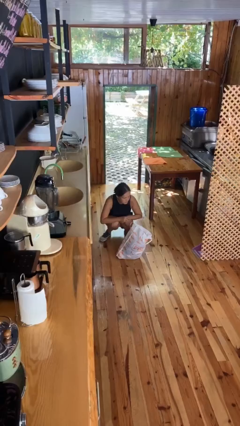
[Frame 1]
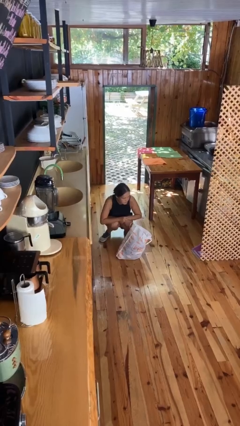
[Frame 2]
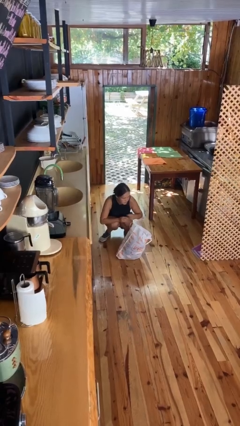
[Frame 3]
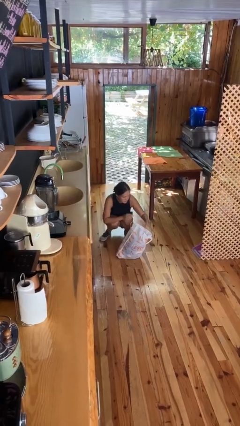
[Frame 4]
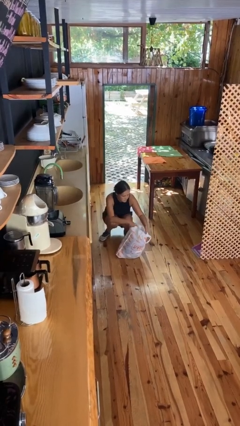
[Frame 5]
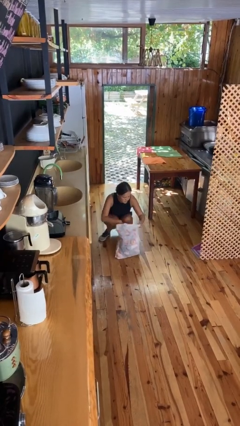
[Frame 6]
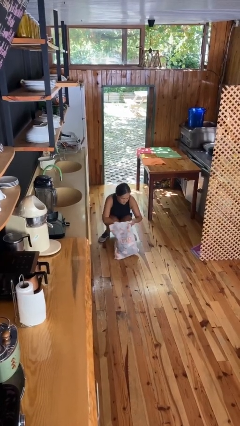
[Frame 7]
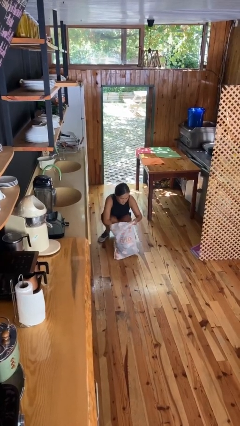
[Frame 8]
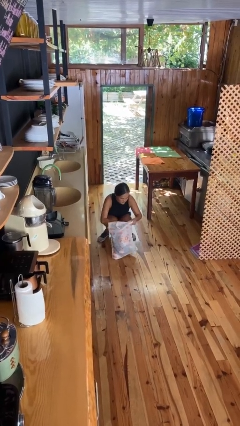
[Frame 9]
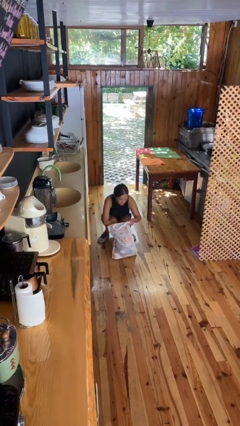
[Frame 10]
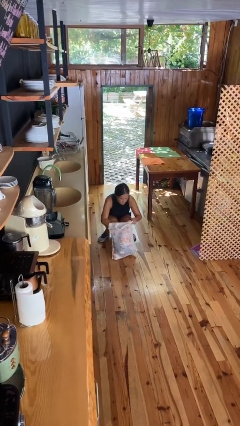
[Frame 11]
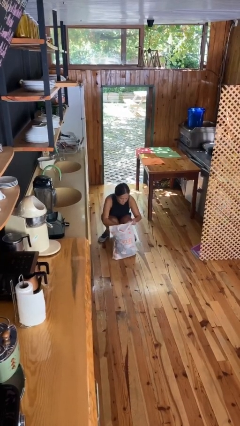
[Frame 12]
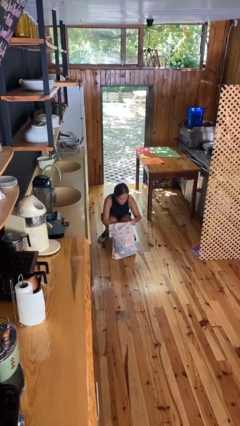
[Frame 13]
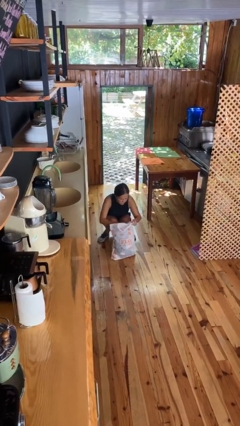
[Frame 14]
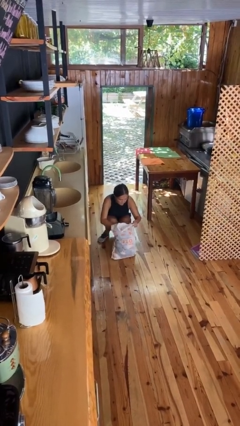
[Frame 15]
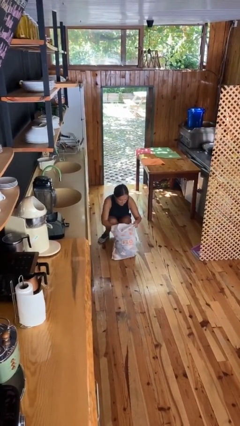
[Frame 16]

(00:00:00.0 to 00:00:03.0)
person searches in bag

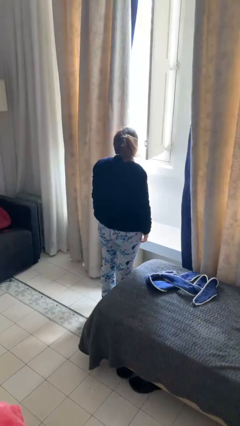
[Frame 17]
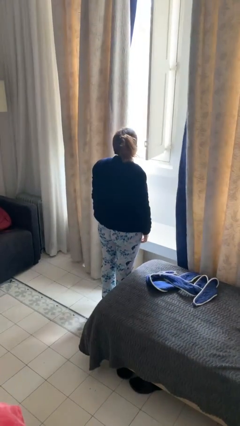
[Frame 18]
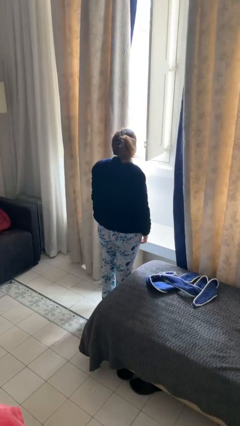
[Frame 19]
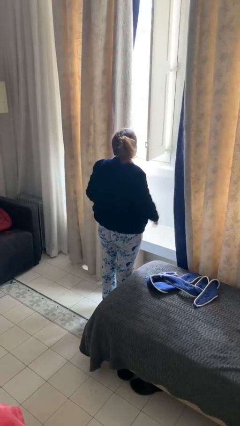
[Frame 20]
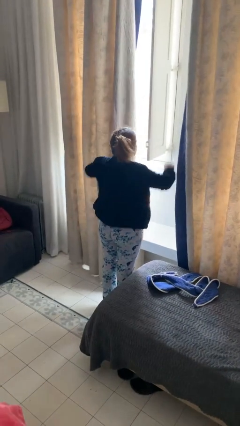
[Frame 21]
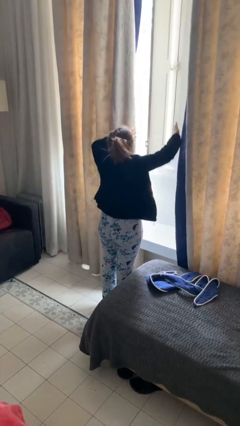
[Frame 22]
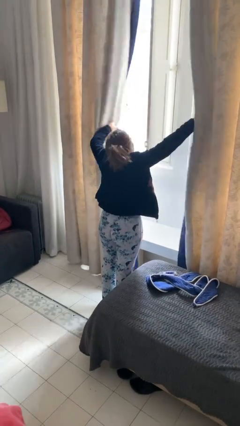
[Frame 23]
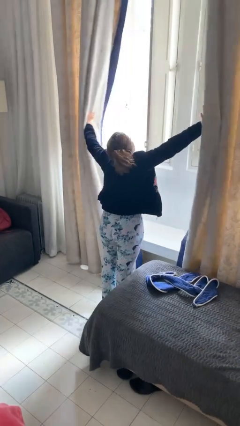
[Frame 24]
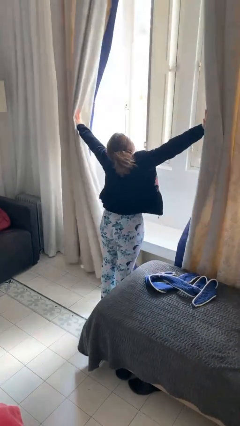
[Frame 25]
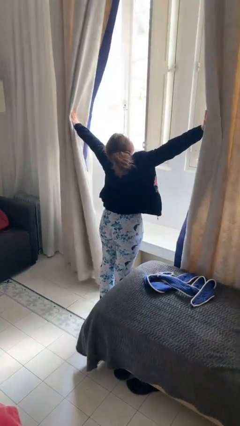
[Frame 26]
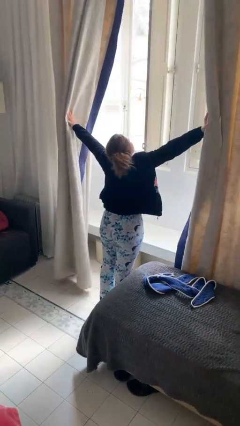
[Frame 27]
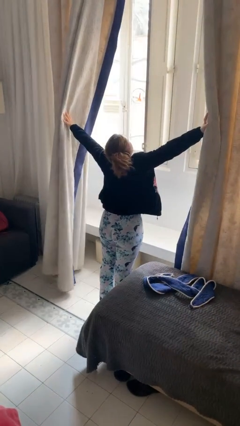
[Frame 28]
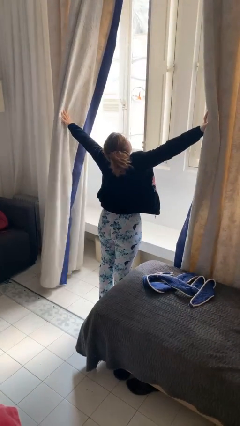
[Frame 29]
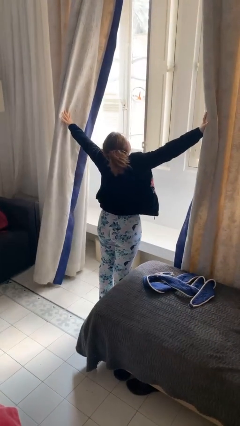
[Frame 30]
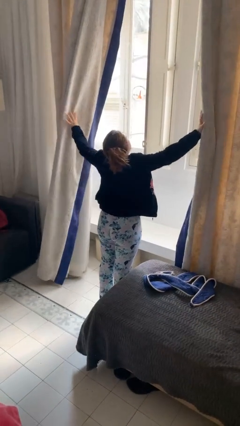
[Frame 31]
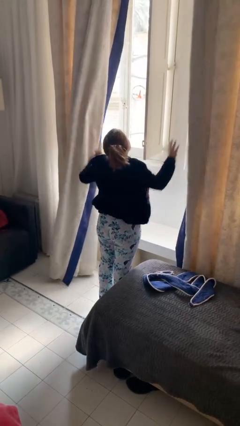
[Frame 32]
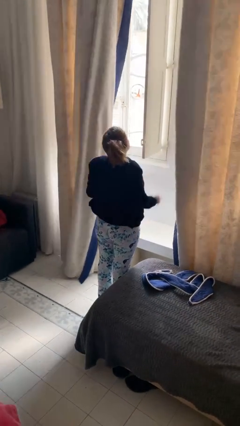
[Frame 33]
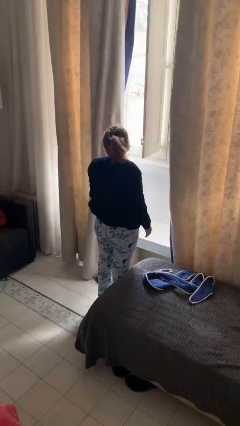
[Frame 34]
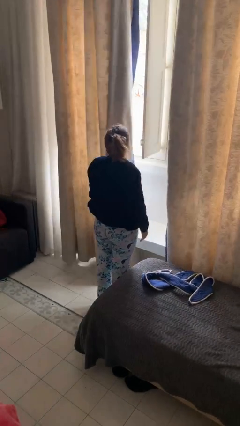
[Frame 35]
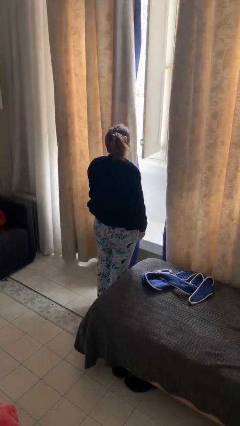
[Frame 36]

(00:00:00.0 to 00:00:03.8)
person opens curtains

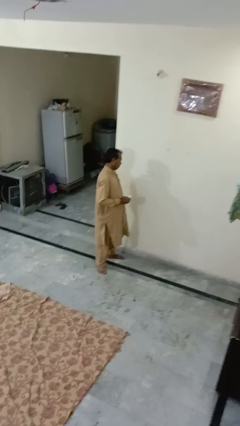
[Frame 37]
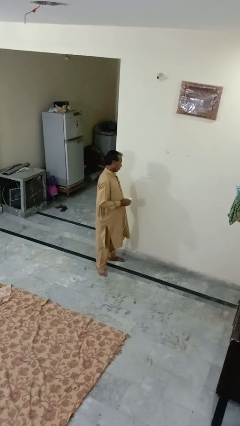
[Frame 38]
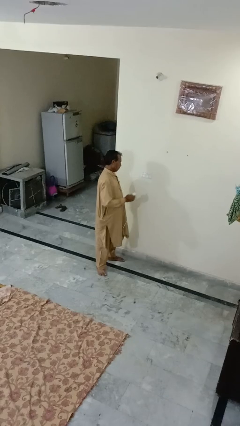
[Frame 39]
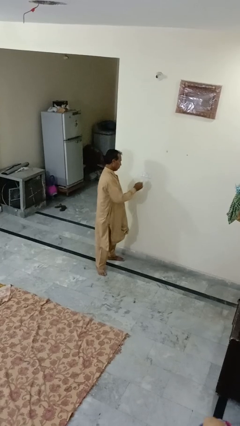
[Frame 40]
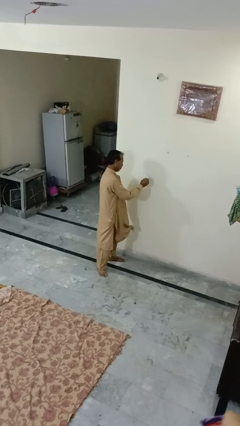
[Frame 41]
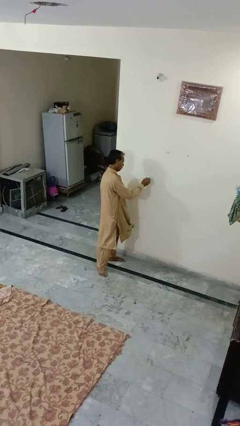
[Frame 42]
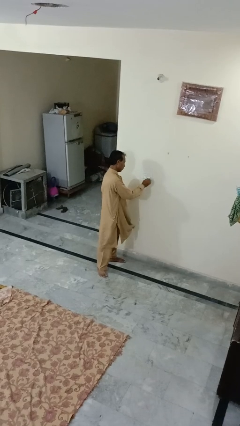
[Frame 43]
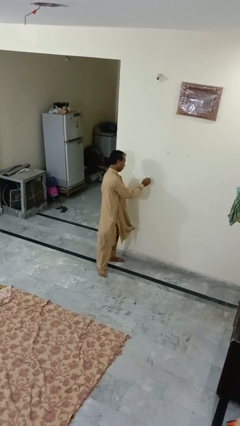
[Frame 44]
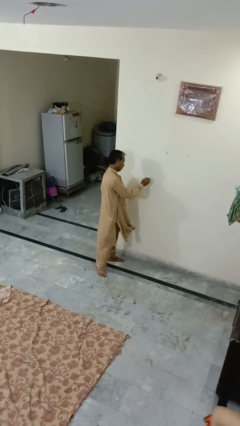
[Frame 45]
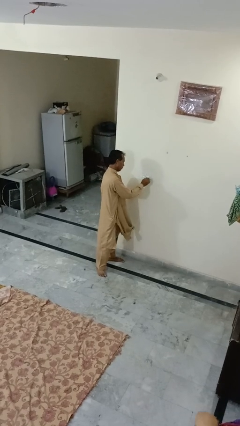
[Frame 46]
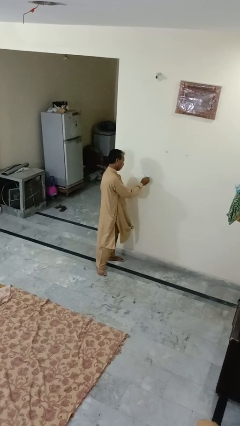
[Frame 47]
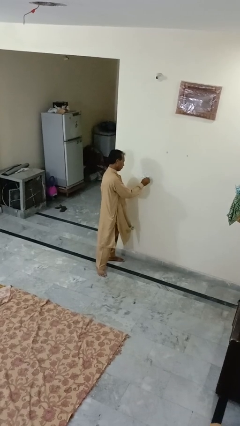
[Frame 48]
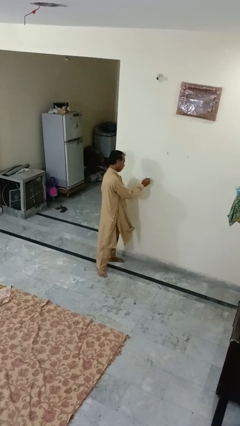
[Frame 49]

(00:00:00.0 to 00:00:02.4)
person plugs into electrical socket

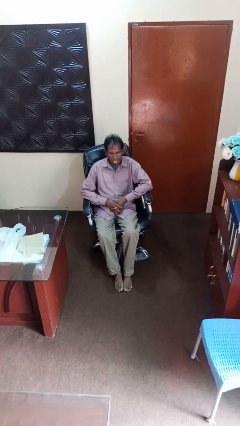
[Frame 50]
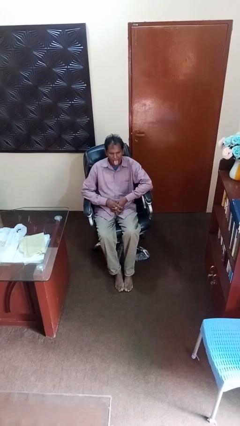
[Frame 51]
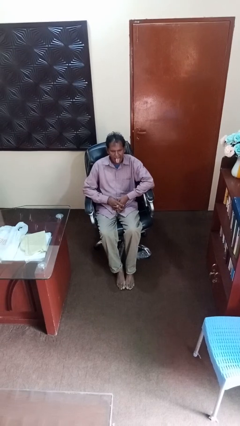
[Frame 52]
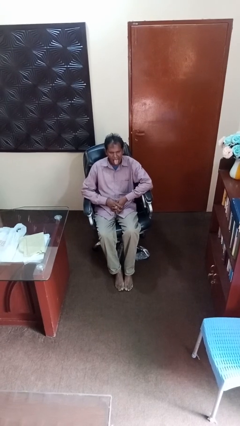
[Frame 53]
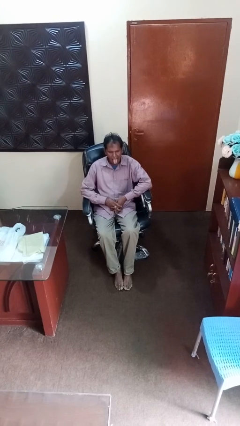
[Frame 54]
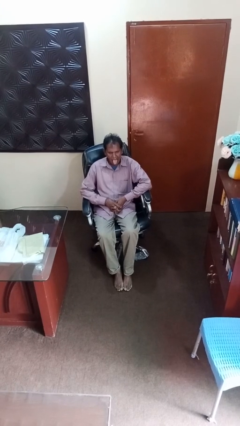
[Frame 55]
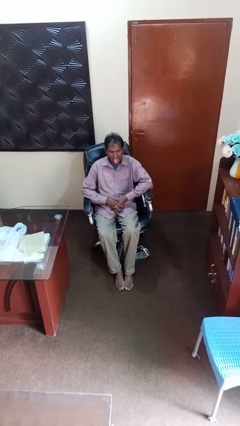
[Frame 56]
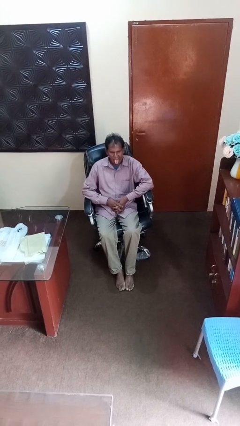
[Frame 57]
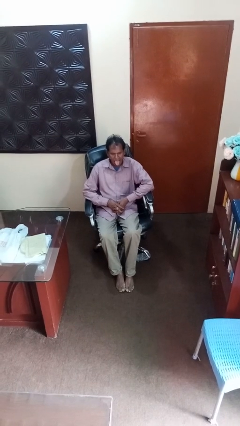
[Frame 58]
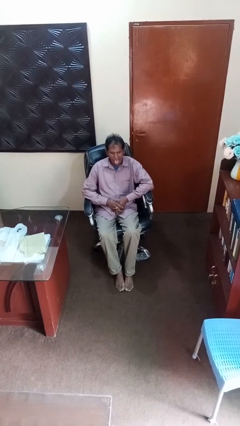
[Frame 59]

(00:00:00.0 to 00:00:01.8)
person sticks out tongue

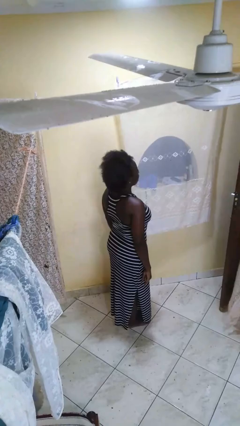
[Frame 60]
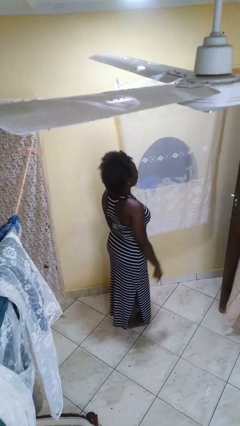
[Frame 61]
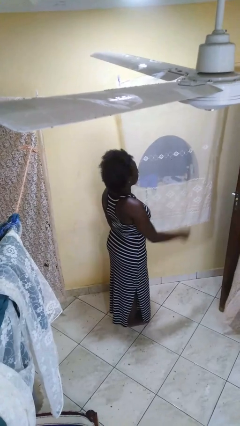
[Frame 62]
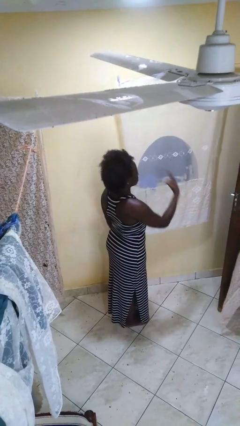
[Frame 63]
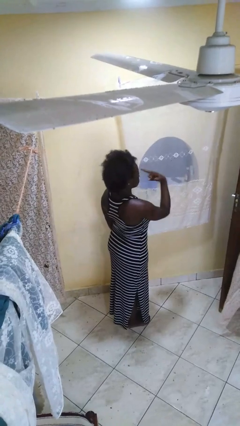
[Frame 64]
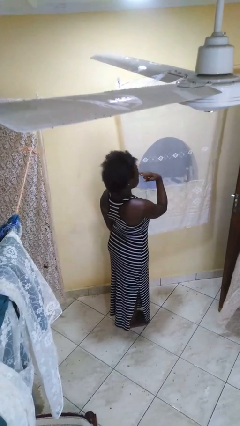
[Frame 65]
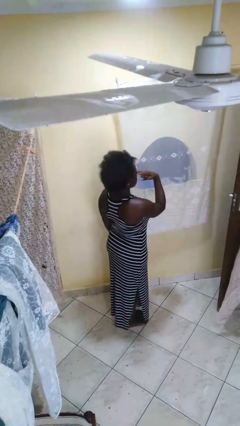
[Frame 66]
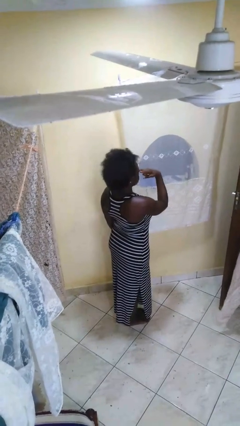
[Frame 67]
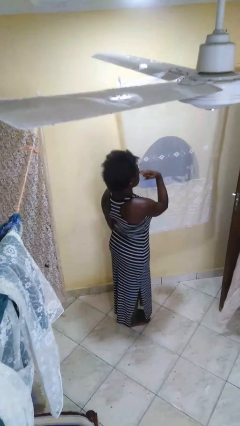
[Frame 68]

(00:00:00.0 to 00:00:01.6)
person gestures watch closely

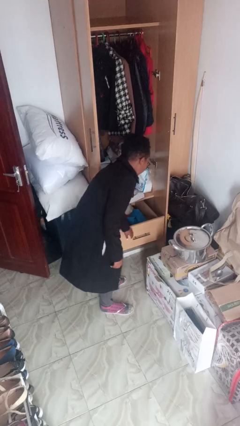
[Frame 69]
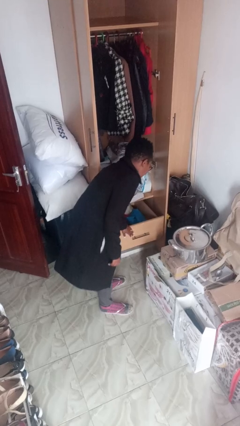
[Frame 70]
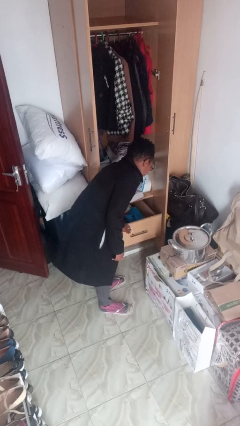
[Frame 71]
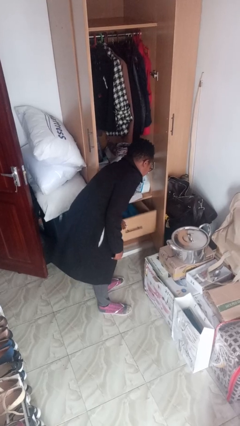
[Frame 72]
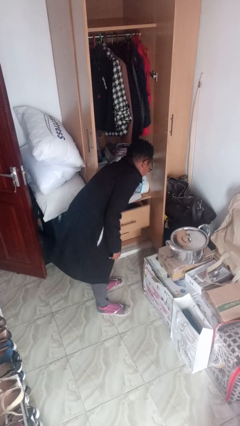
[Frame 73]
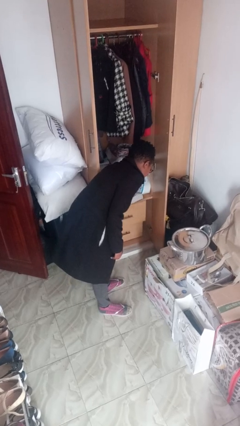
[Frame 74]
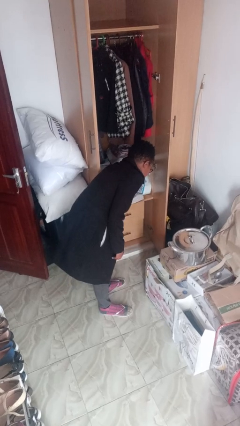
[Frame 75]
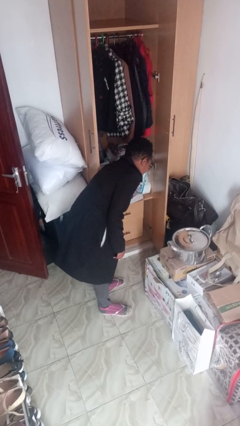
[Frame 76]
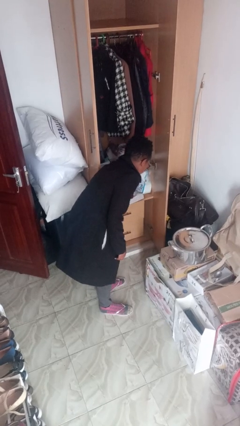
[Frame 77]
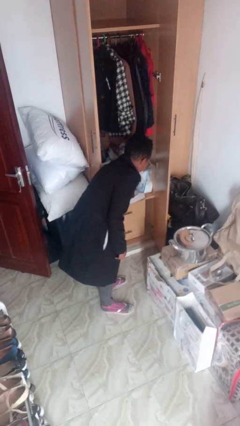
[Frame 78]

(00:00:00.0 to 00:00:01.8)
person closes dresser drawer

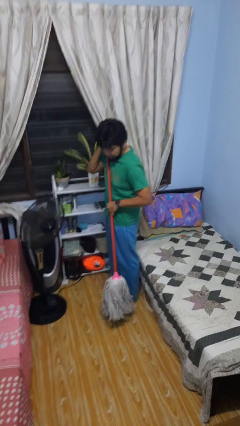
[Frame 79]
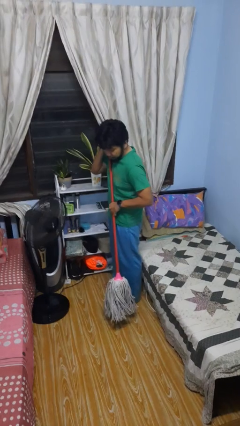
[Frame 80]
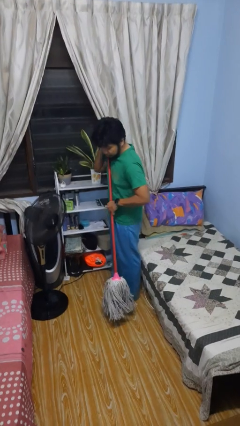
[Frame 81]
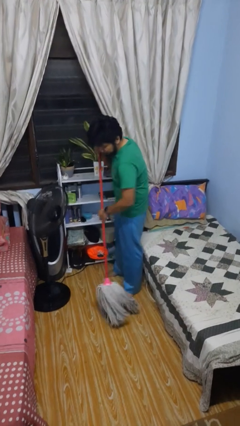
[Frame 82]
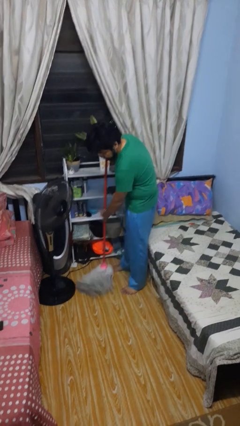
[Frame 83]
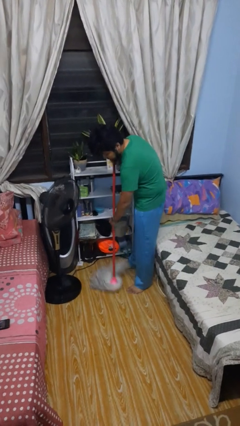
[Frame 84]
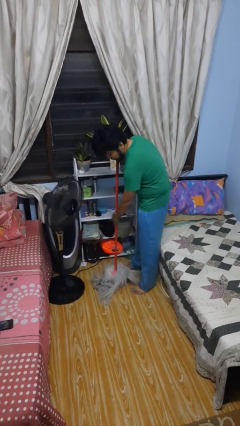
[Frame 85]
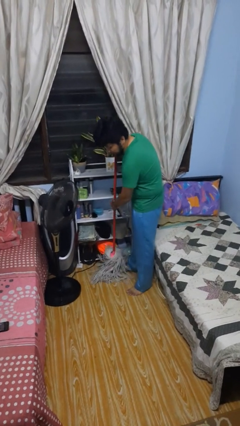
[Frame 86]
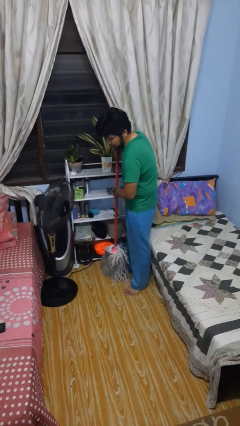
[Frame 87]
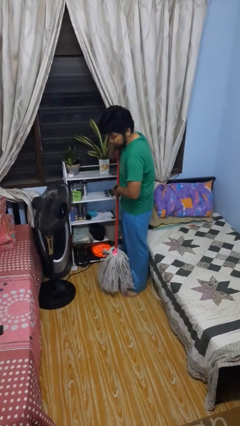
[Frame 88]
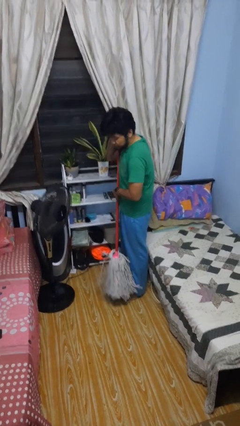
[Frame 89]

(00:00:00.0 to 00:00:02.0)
person mops
